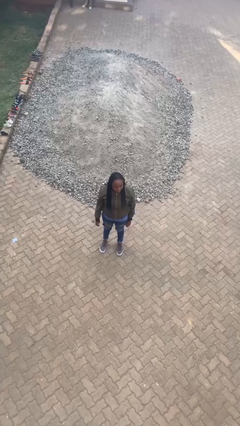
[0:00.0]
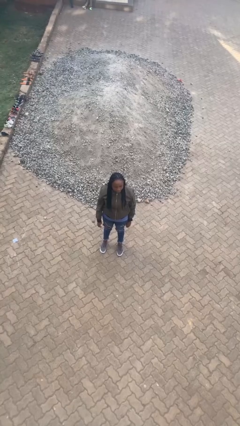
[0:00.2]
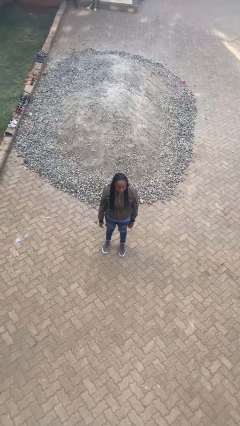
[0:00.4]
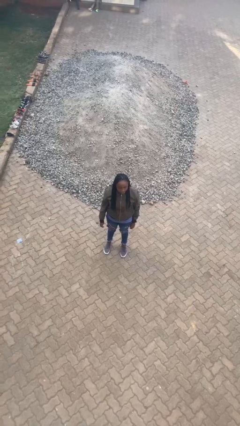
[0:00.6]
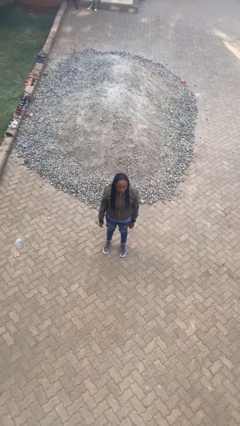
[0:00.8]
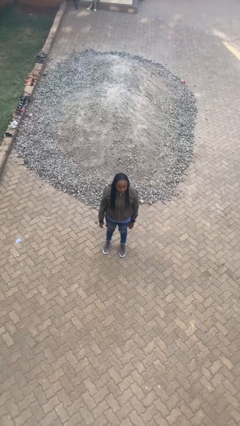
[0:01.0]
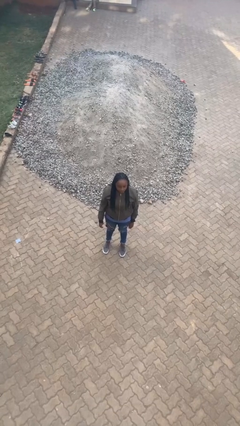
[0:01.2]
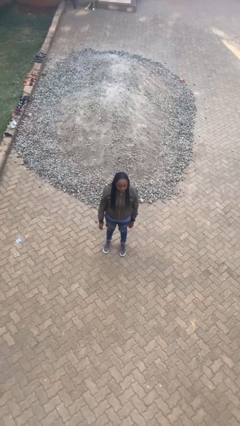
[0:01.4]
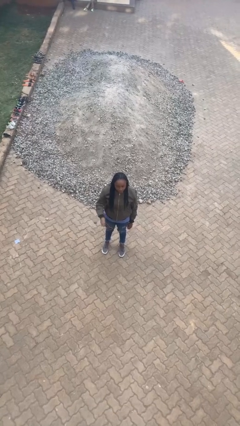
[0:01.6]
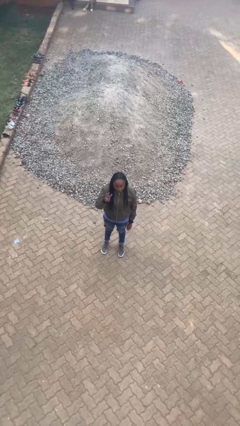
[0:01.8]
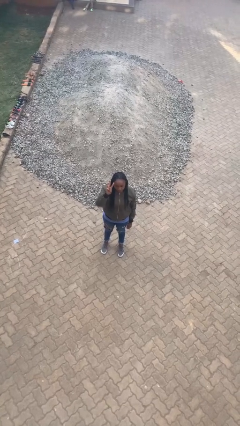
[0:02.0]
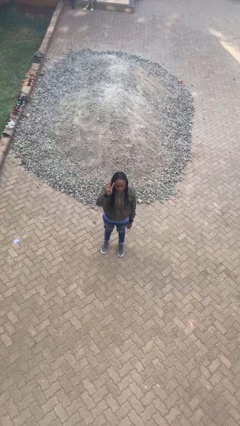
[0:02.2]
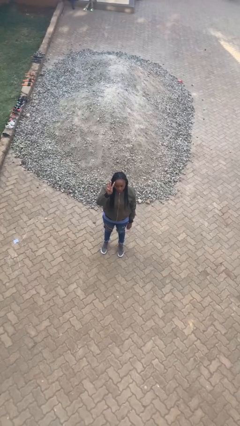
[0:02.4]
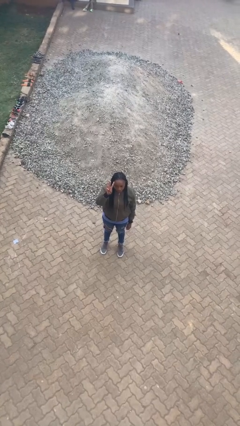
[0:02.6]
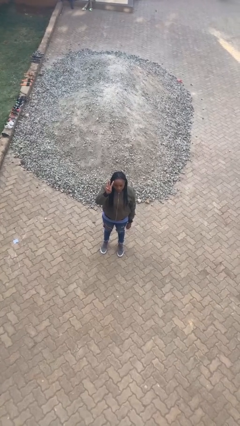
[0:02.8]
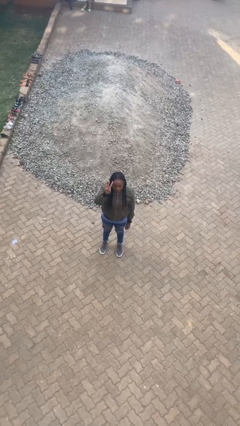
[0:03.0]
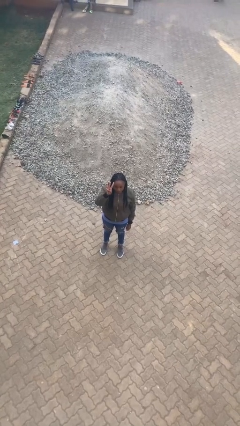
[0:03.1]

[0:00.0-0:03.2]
person gestures number three

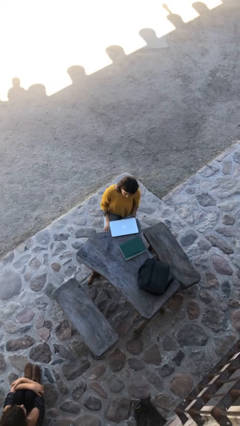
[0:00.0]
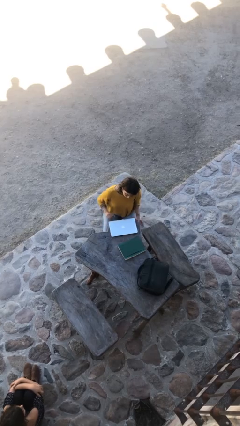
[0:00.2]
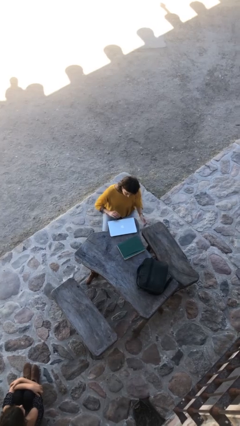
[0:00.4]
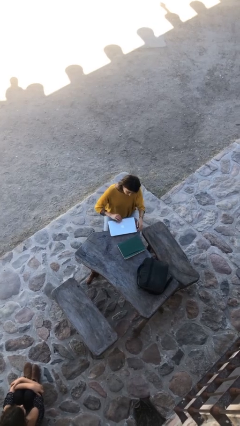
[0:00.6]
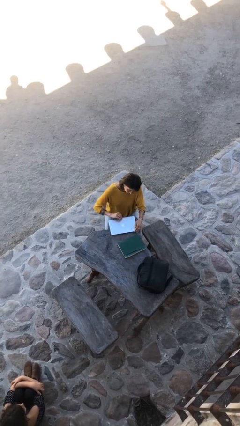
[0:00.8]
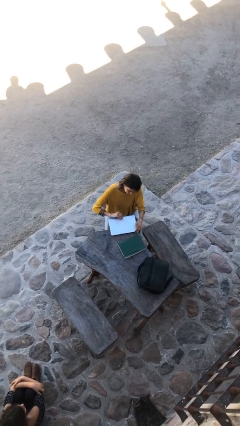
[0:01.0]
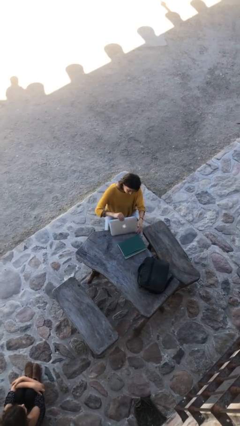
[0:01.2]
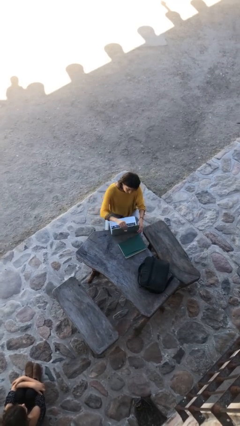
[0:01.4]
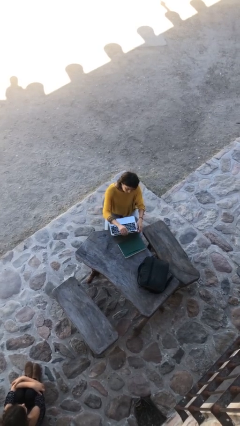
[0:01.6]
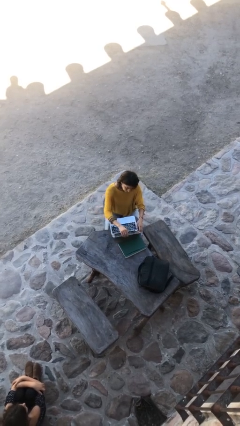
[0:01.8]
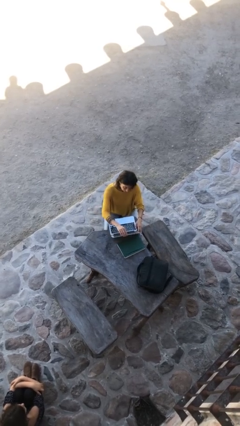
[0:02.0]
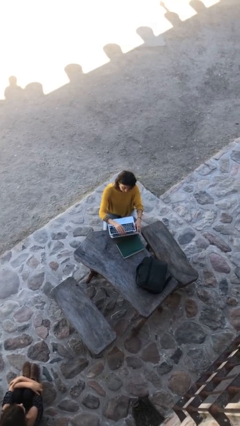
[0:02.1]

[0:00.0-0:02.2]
person interacts with laptop

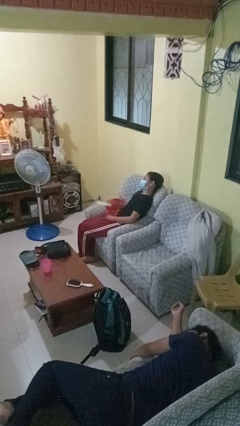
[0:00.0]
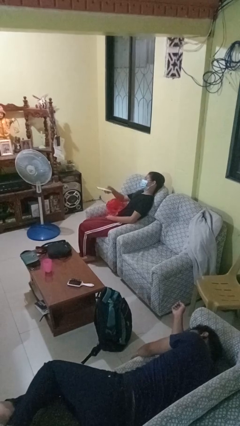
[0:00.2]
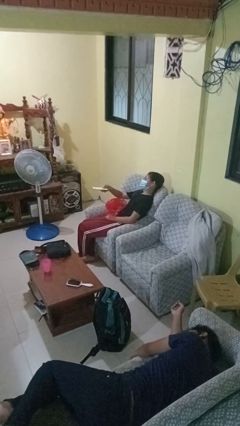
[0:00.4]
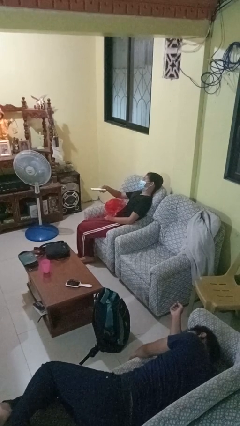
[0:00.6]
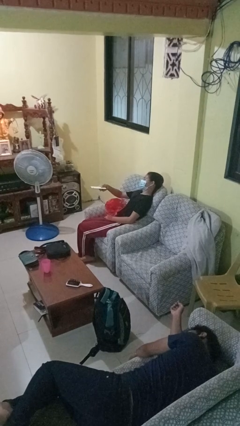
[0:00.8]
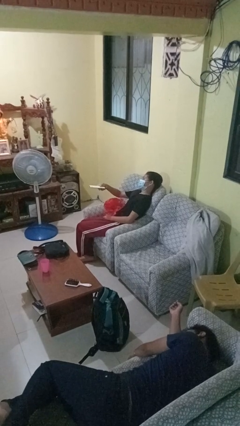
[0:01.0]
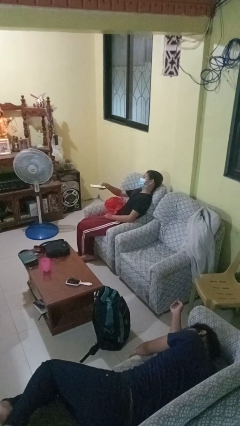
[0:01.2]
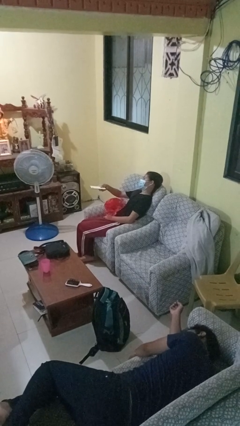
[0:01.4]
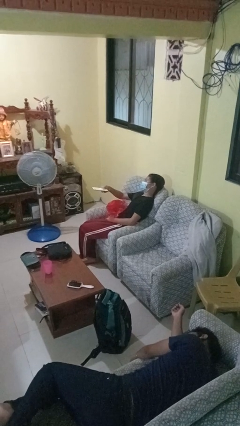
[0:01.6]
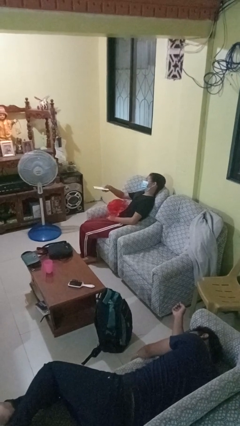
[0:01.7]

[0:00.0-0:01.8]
person uses television remote

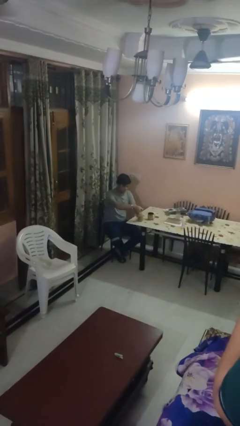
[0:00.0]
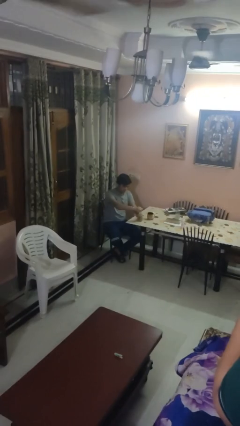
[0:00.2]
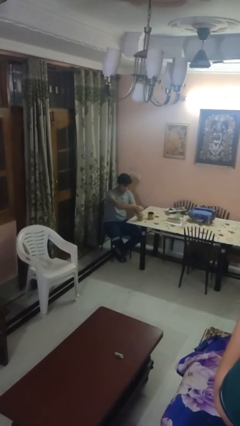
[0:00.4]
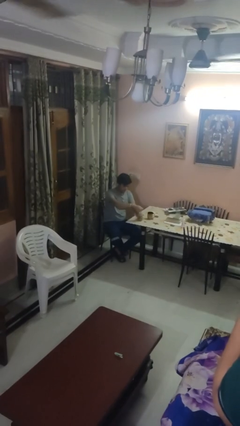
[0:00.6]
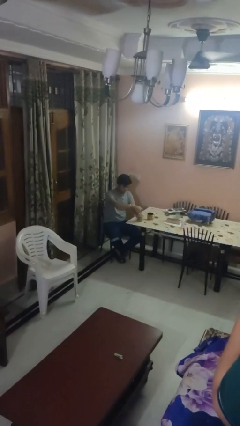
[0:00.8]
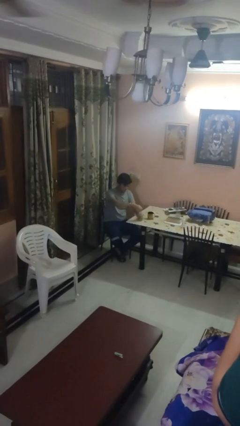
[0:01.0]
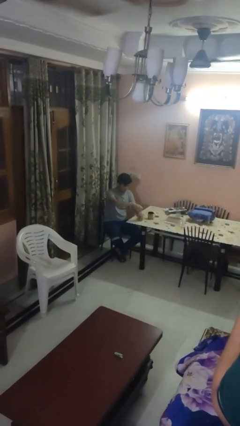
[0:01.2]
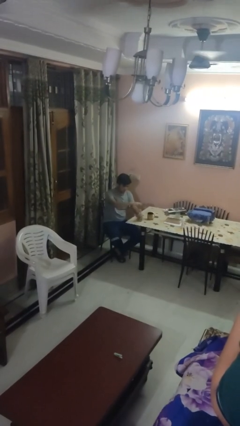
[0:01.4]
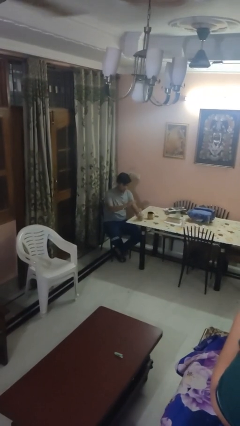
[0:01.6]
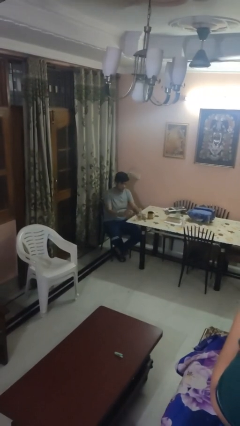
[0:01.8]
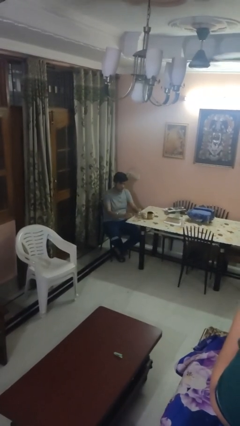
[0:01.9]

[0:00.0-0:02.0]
person unscrews lid from bottle

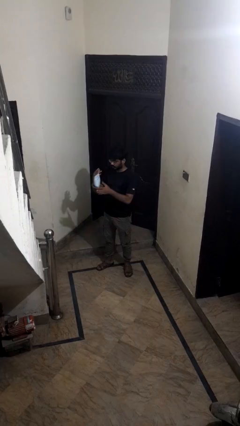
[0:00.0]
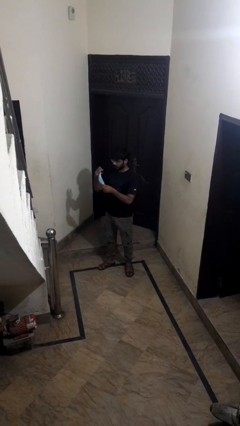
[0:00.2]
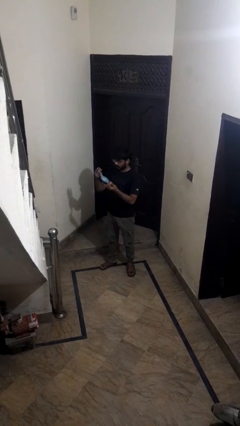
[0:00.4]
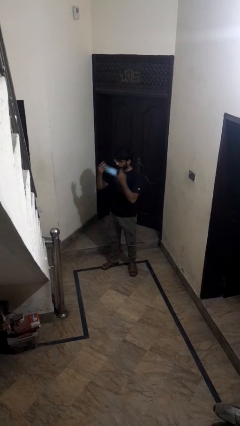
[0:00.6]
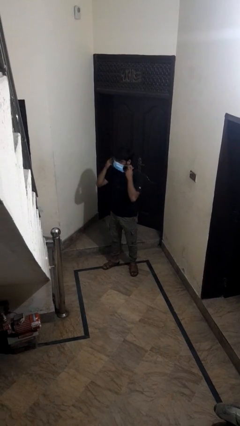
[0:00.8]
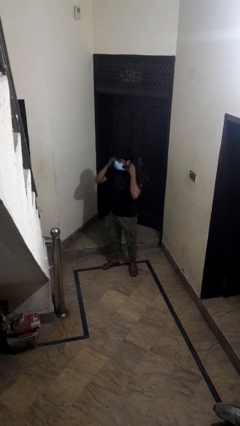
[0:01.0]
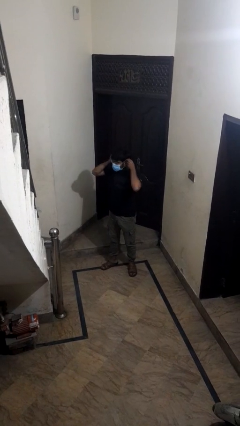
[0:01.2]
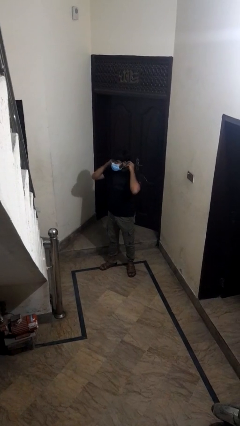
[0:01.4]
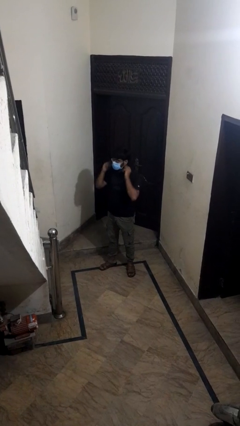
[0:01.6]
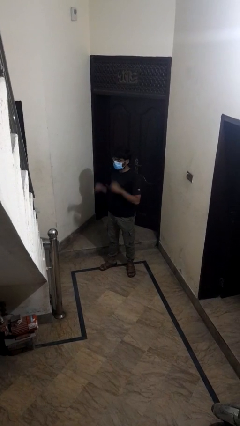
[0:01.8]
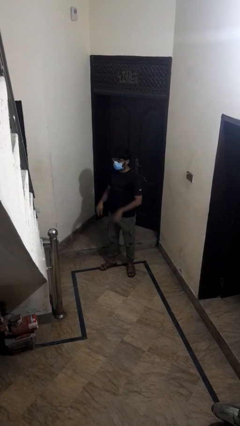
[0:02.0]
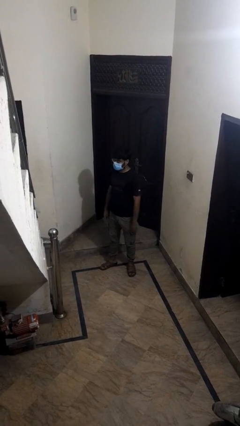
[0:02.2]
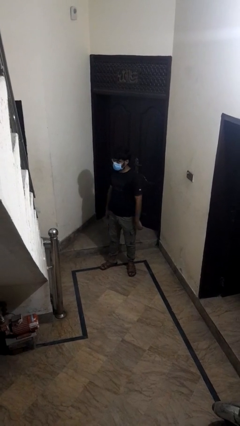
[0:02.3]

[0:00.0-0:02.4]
person puts on facemask

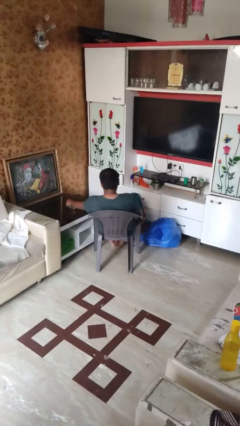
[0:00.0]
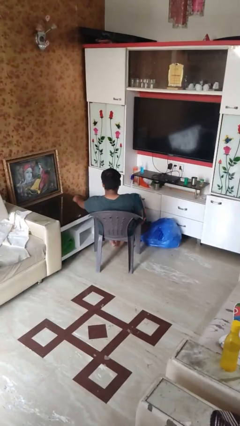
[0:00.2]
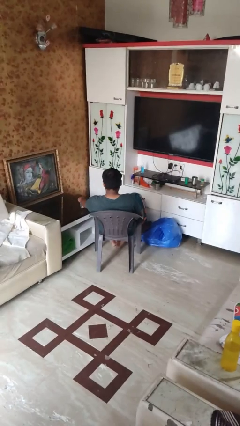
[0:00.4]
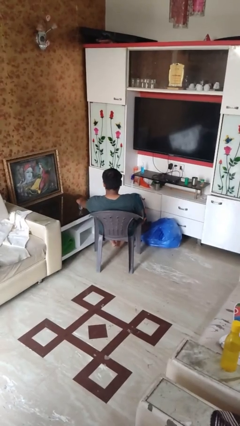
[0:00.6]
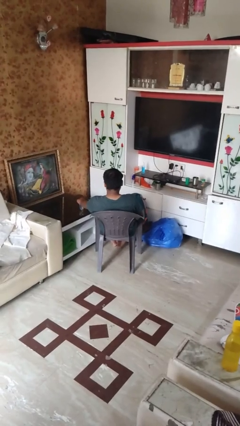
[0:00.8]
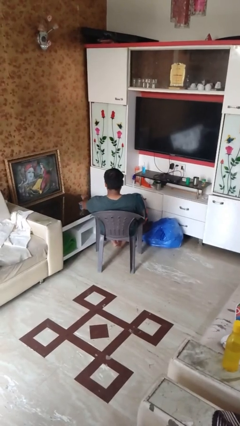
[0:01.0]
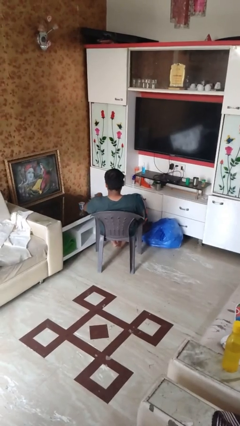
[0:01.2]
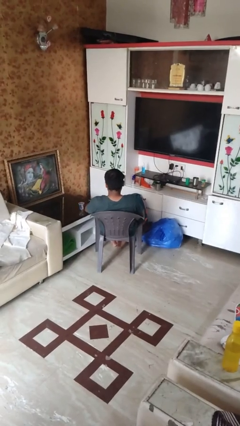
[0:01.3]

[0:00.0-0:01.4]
person sets upright glass

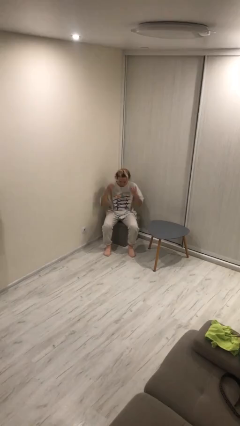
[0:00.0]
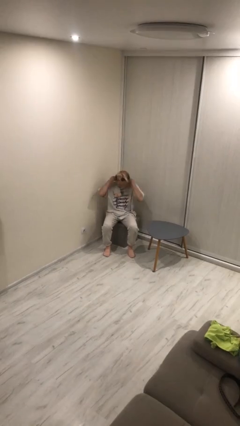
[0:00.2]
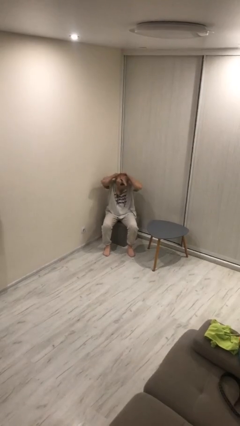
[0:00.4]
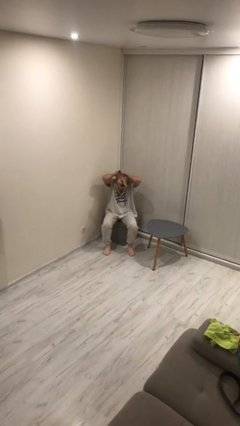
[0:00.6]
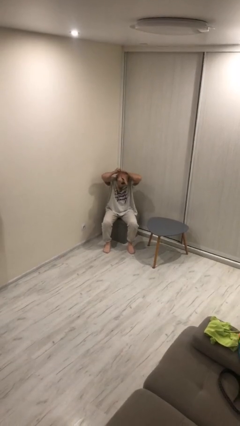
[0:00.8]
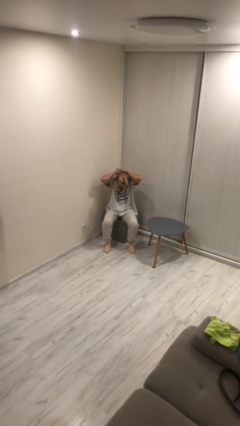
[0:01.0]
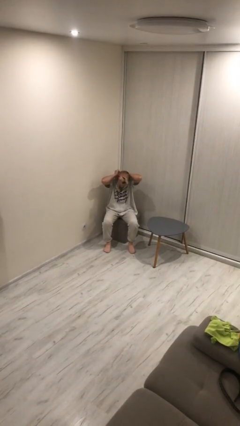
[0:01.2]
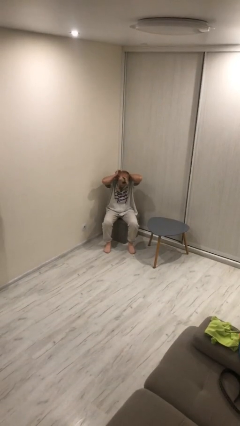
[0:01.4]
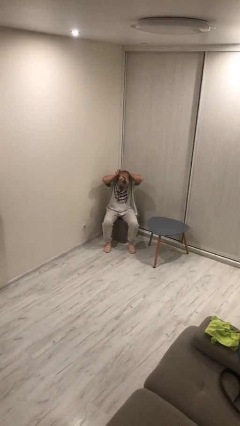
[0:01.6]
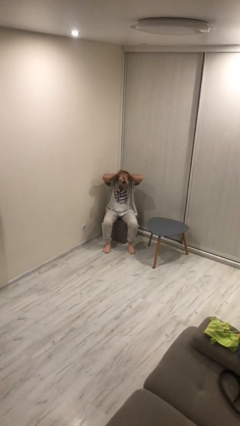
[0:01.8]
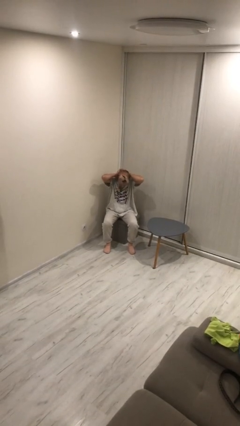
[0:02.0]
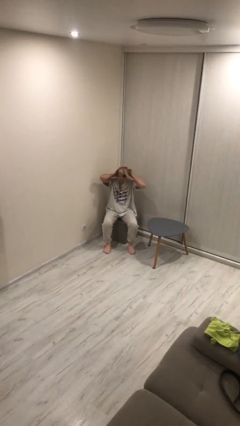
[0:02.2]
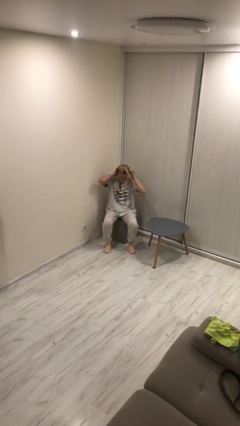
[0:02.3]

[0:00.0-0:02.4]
person puts on necklace

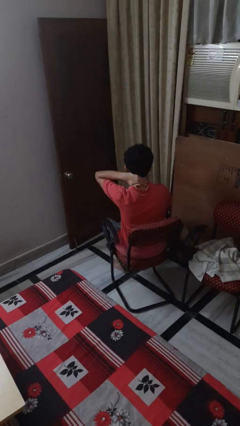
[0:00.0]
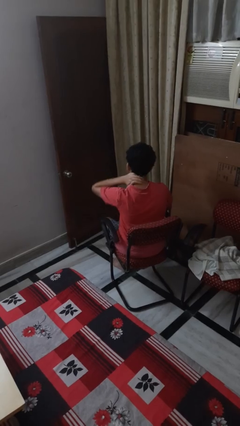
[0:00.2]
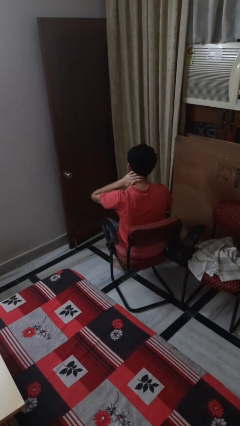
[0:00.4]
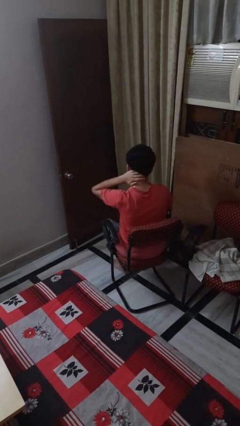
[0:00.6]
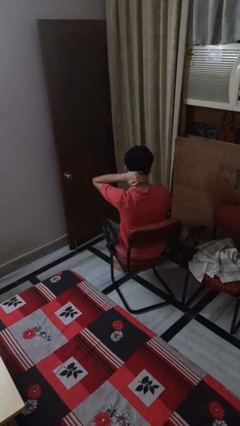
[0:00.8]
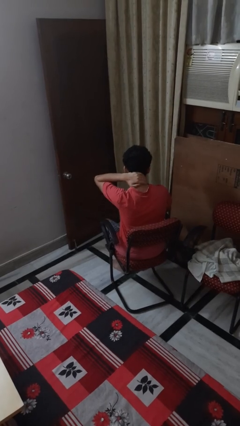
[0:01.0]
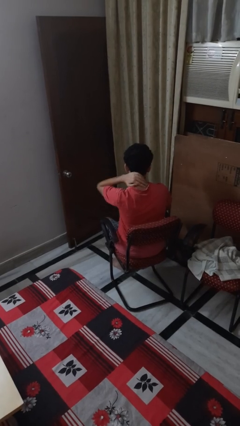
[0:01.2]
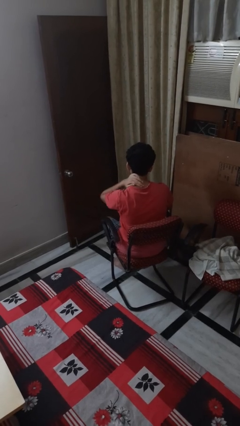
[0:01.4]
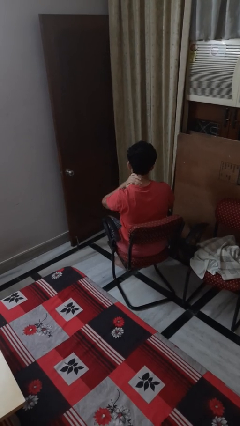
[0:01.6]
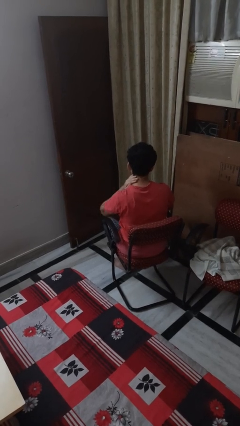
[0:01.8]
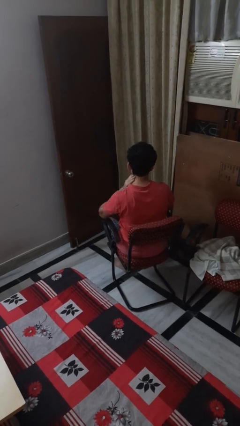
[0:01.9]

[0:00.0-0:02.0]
person rubs neck
